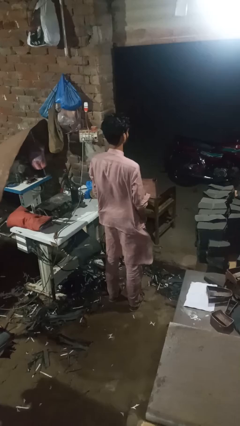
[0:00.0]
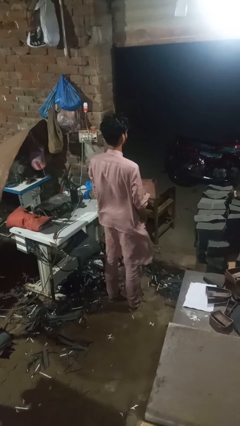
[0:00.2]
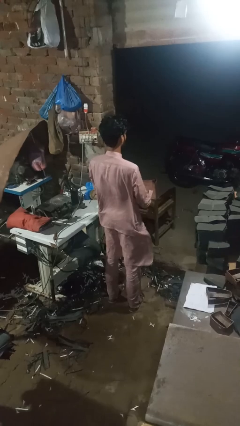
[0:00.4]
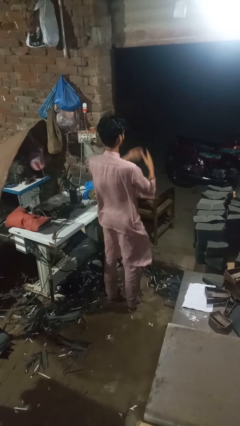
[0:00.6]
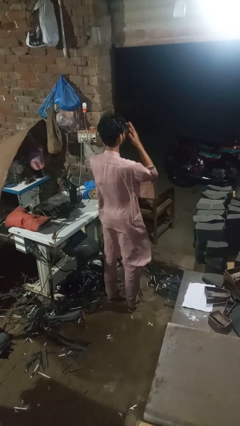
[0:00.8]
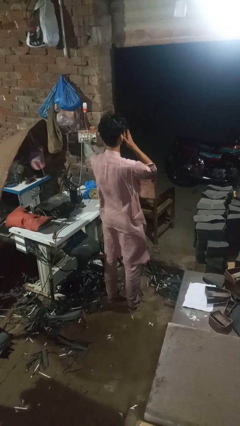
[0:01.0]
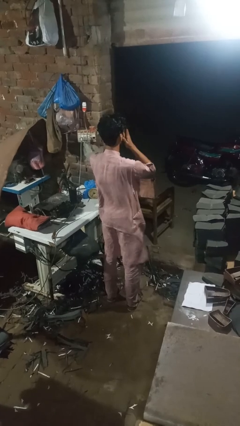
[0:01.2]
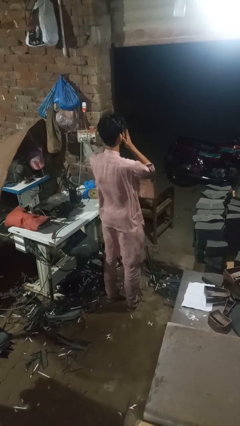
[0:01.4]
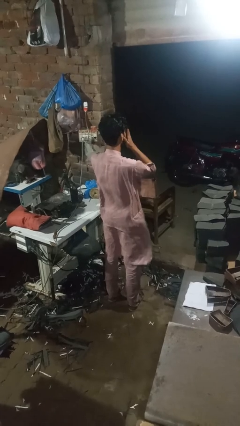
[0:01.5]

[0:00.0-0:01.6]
person sneezes into hand

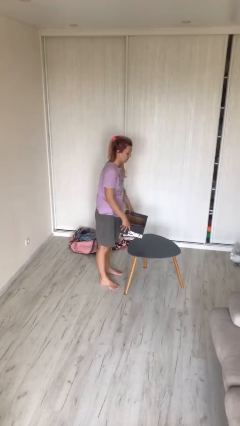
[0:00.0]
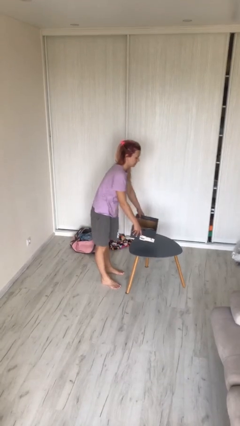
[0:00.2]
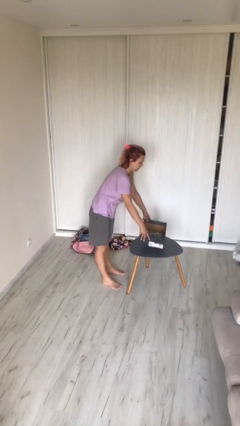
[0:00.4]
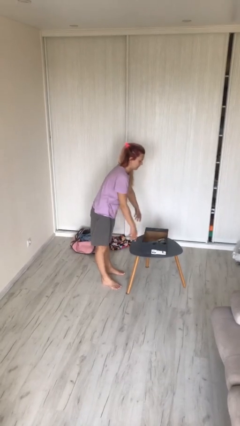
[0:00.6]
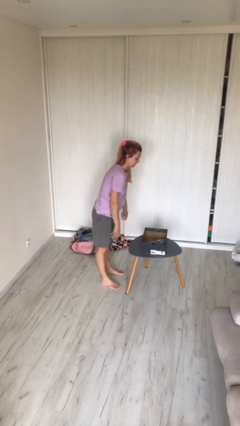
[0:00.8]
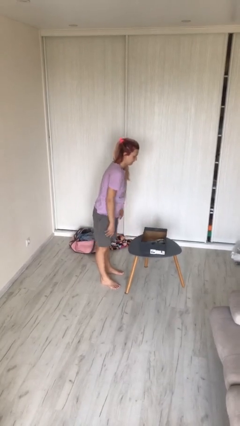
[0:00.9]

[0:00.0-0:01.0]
person unloads box onto table

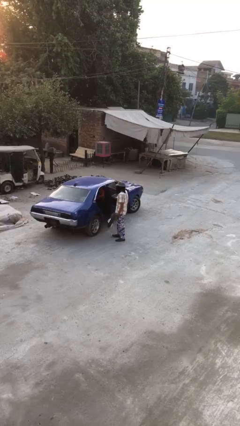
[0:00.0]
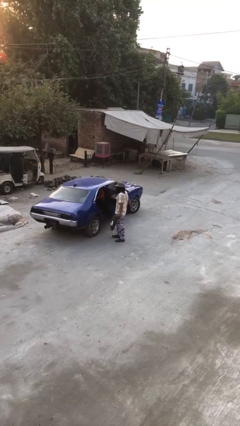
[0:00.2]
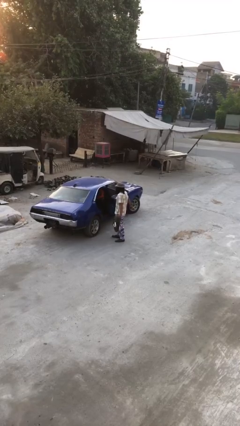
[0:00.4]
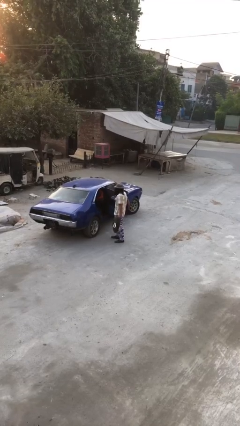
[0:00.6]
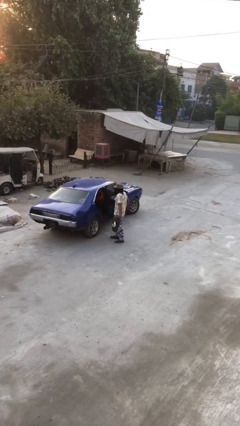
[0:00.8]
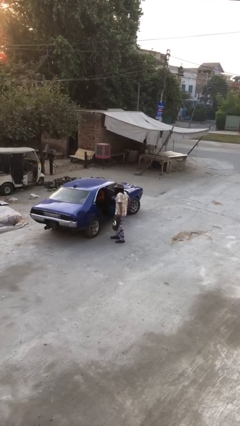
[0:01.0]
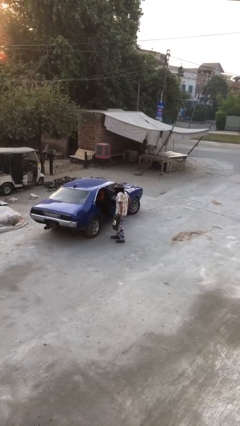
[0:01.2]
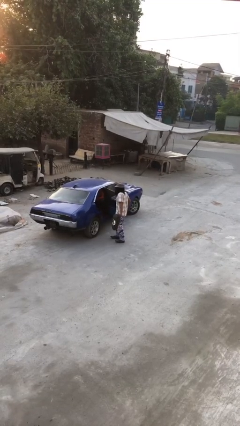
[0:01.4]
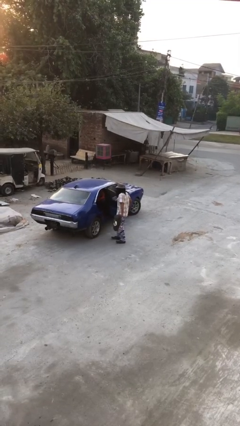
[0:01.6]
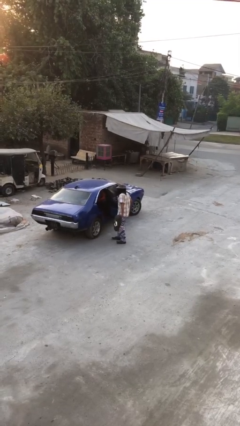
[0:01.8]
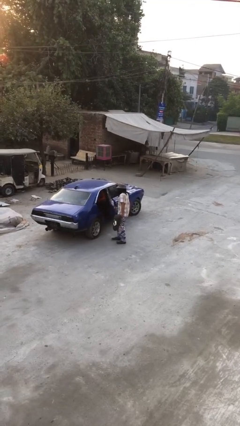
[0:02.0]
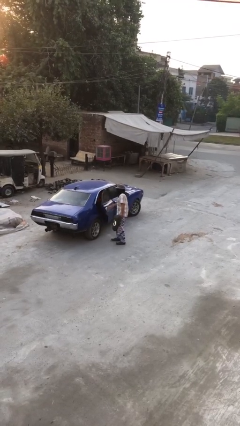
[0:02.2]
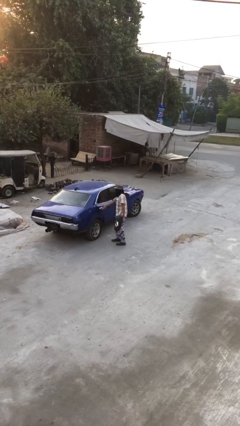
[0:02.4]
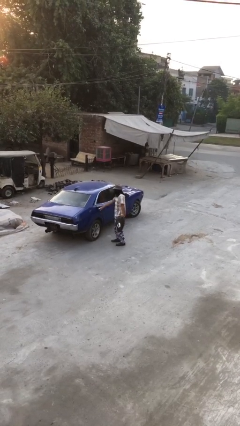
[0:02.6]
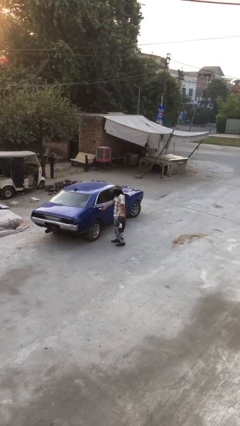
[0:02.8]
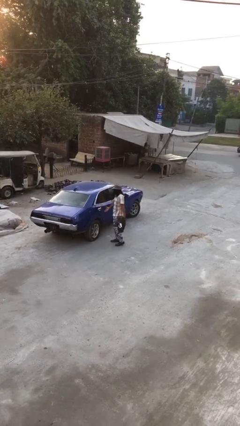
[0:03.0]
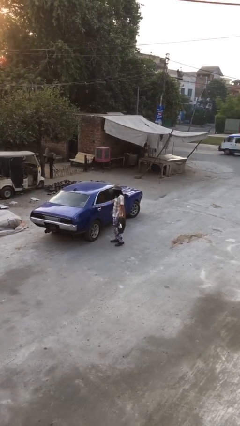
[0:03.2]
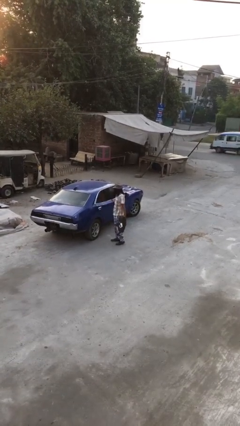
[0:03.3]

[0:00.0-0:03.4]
person closes car door

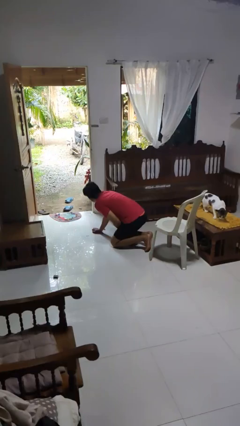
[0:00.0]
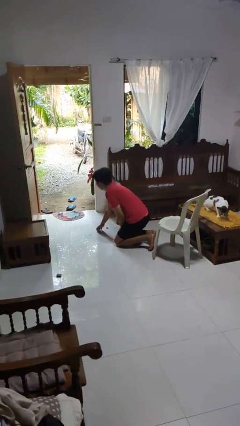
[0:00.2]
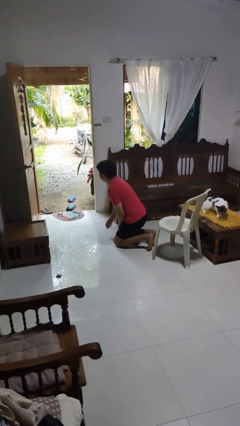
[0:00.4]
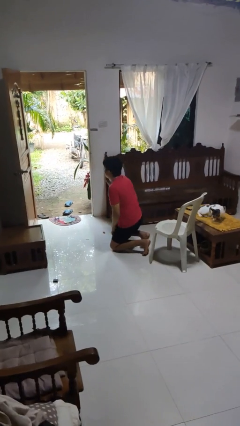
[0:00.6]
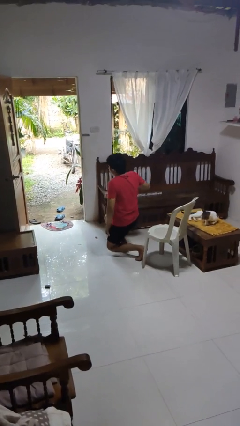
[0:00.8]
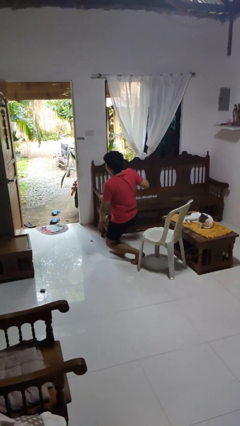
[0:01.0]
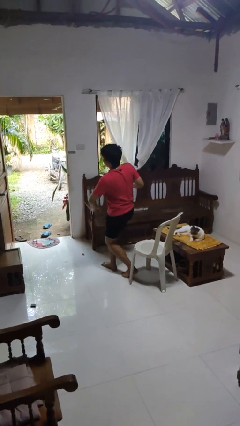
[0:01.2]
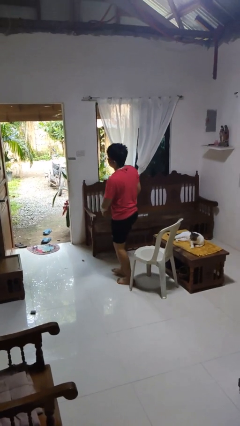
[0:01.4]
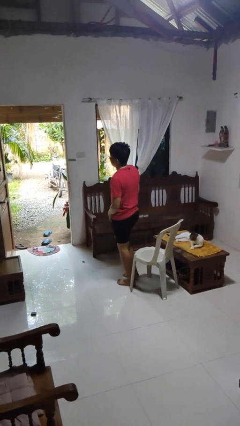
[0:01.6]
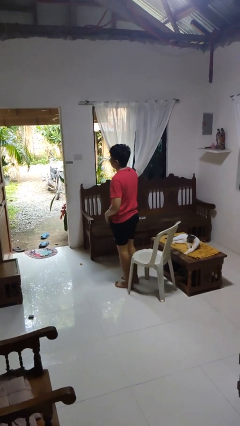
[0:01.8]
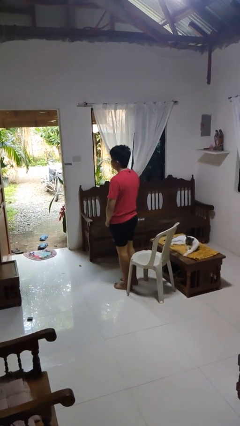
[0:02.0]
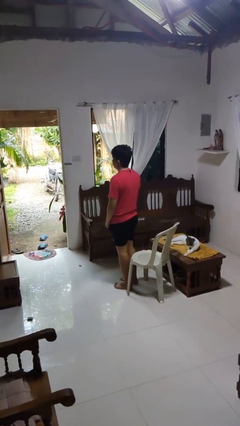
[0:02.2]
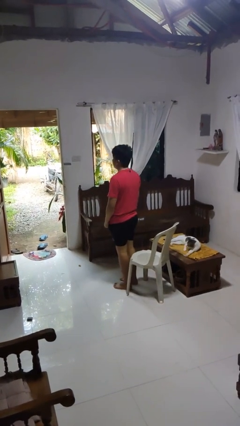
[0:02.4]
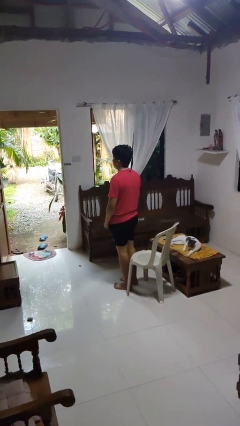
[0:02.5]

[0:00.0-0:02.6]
person stands up from floor

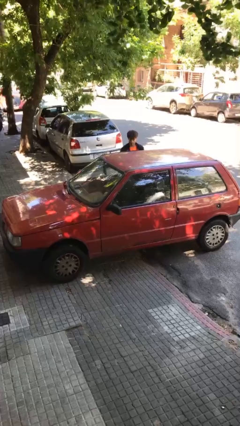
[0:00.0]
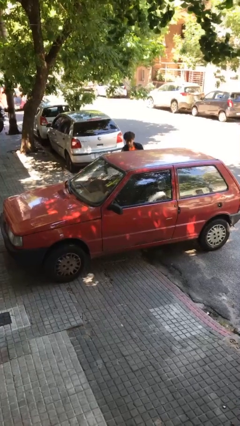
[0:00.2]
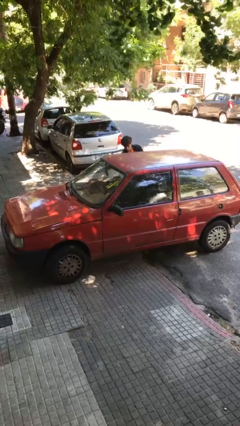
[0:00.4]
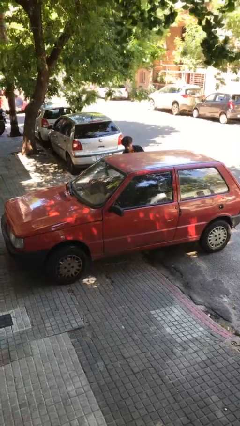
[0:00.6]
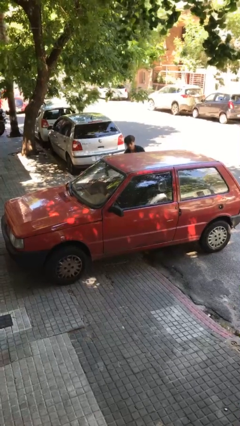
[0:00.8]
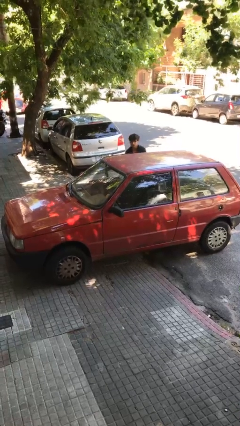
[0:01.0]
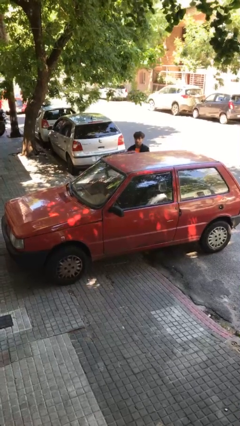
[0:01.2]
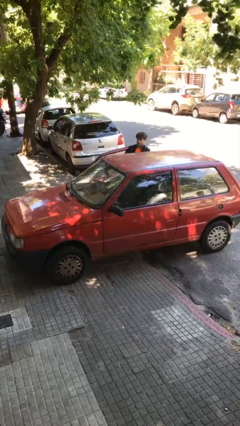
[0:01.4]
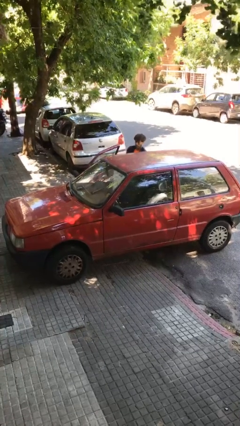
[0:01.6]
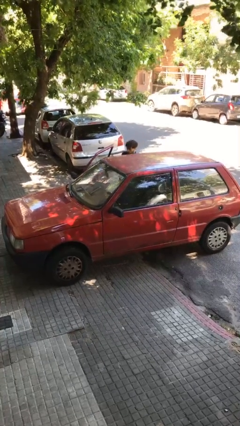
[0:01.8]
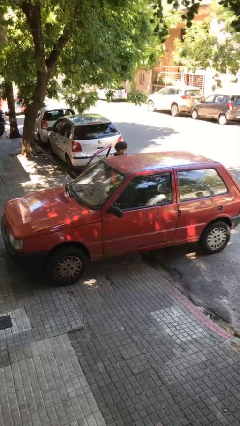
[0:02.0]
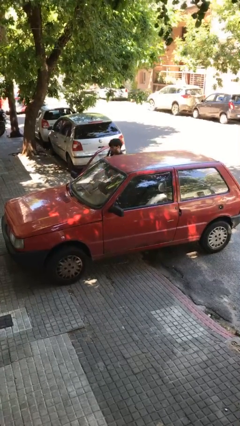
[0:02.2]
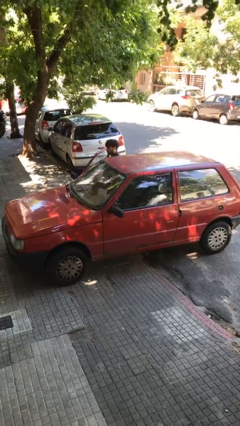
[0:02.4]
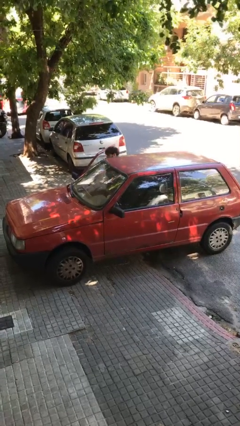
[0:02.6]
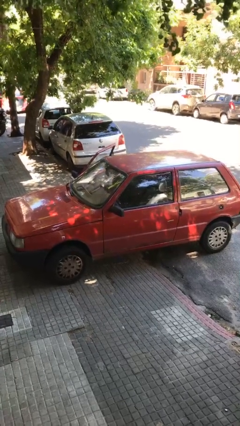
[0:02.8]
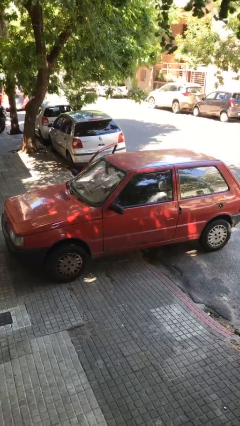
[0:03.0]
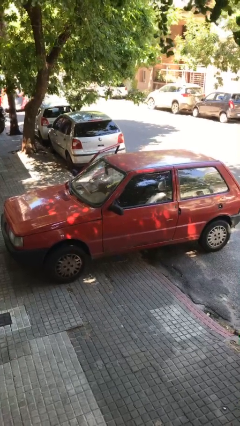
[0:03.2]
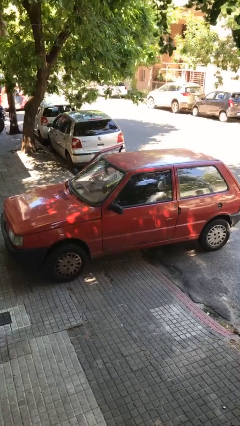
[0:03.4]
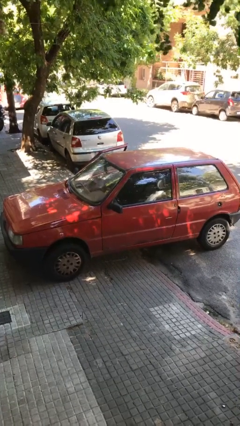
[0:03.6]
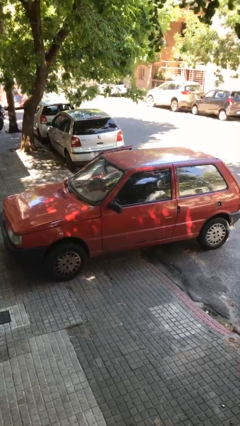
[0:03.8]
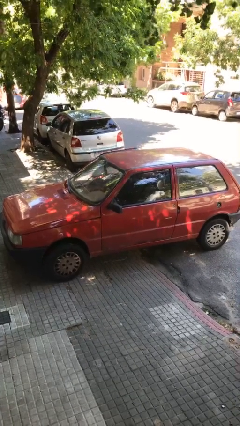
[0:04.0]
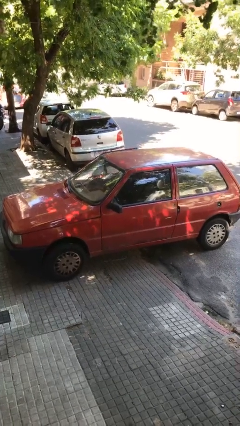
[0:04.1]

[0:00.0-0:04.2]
car picks up person

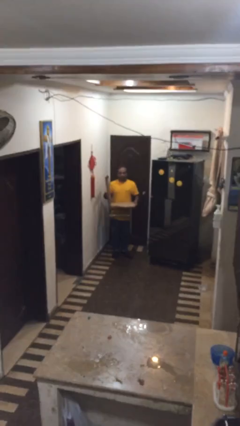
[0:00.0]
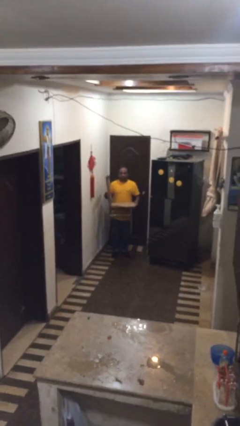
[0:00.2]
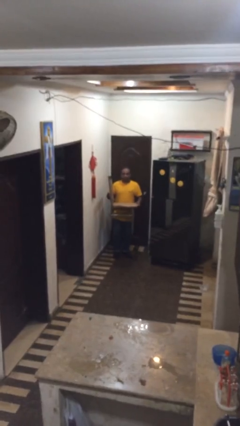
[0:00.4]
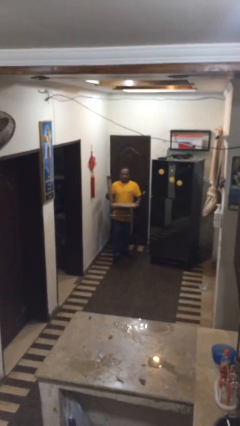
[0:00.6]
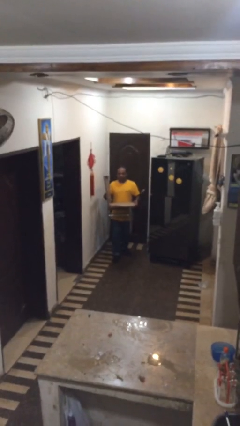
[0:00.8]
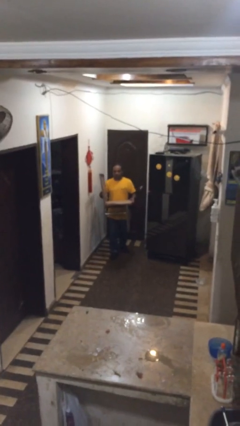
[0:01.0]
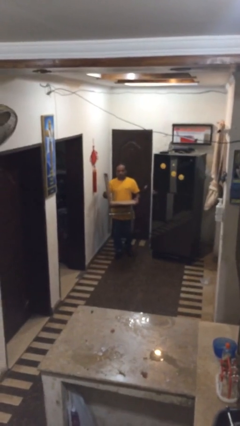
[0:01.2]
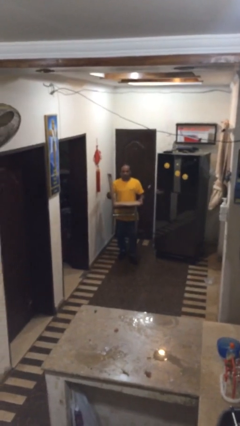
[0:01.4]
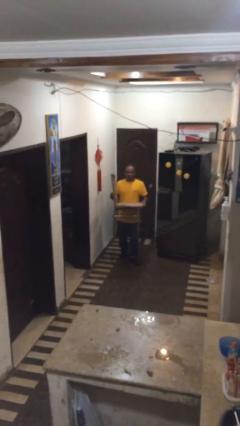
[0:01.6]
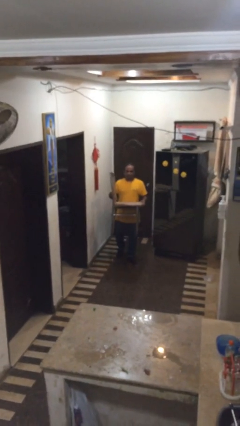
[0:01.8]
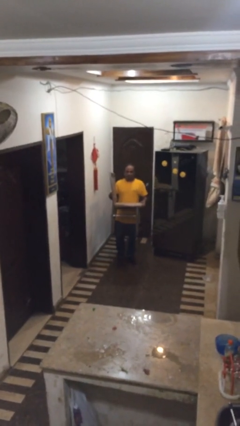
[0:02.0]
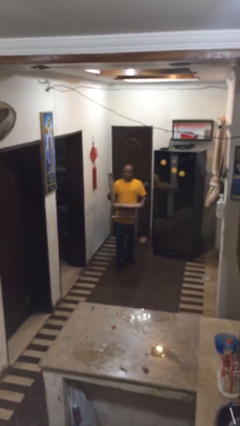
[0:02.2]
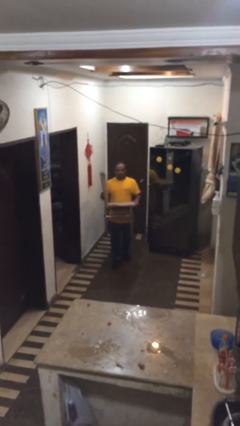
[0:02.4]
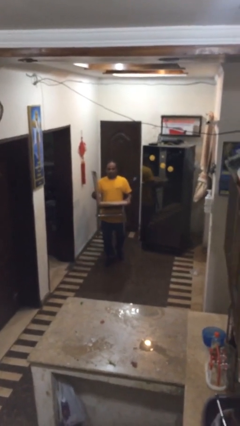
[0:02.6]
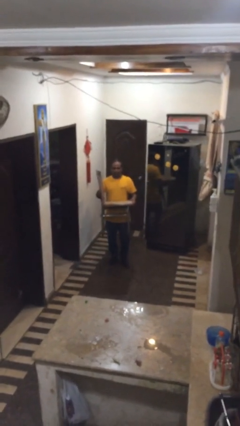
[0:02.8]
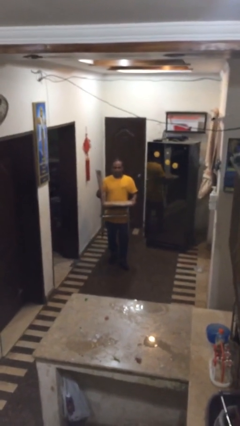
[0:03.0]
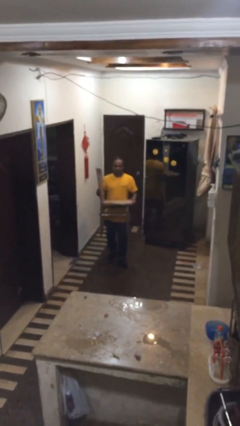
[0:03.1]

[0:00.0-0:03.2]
person carries heavy object

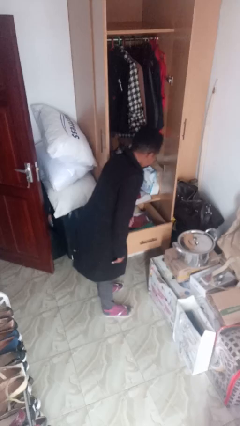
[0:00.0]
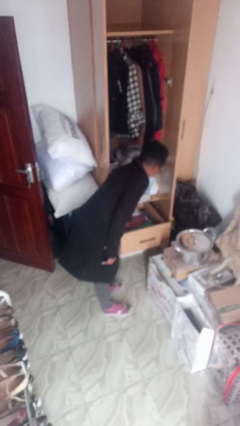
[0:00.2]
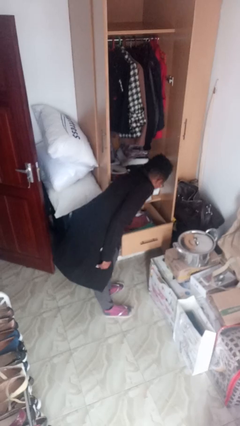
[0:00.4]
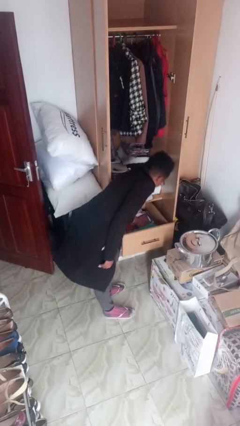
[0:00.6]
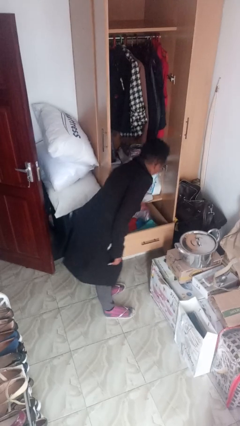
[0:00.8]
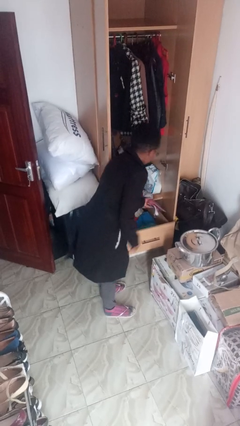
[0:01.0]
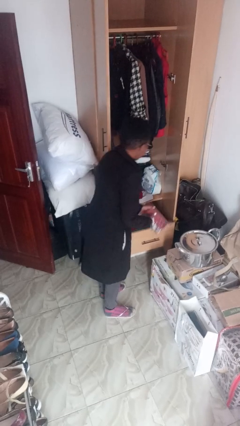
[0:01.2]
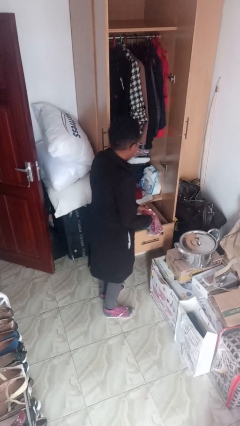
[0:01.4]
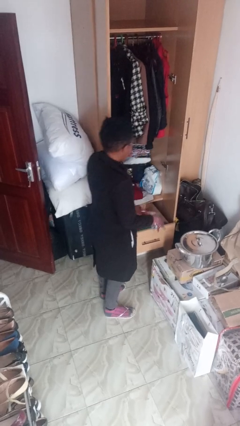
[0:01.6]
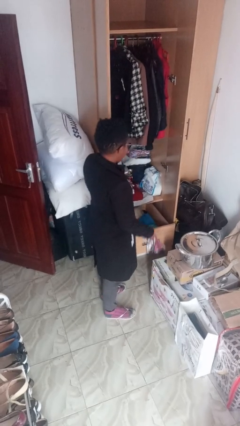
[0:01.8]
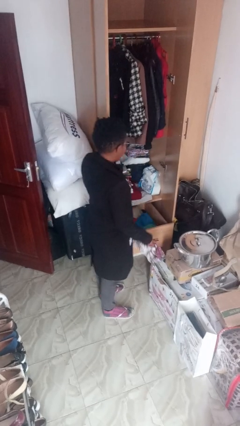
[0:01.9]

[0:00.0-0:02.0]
person takes clothes from dresser
